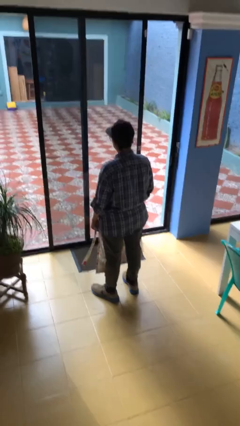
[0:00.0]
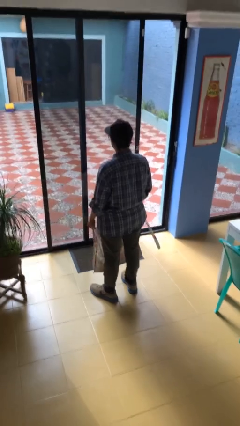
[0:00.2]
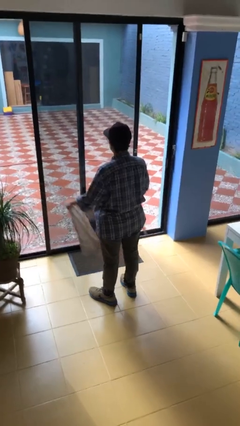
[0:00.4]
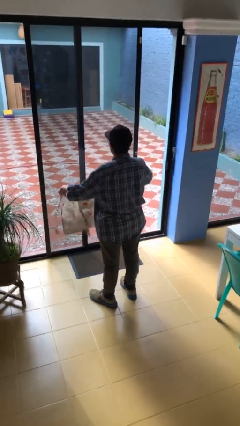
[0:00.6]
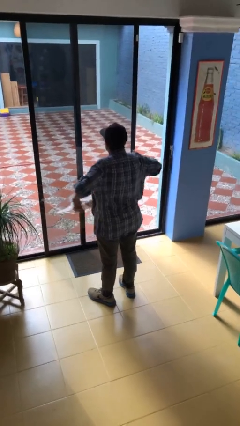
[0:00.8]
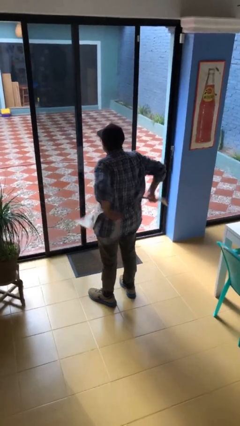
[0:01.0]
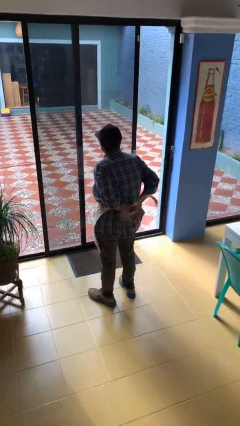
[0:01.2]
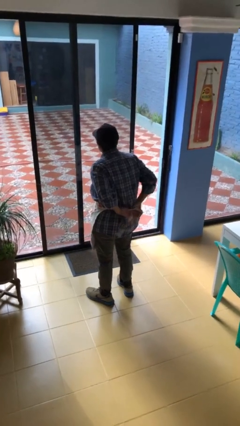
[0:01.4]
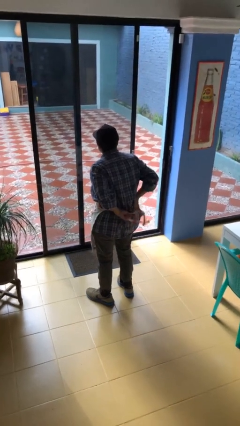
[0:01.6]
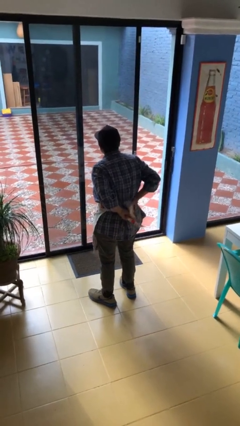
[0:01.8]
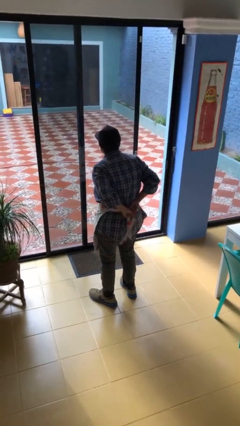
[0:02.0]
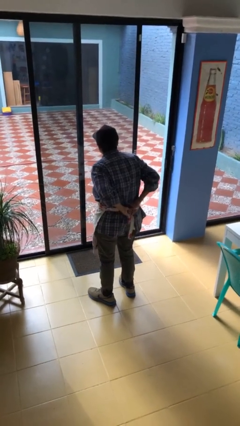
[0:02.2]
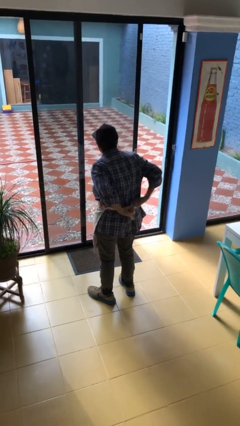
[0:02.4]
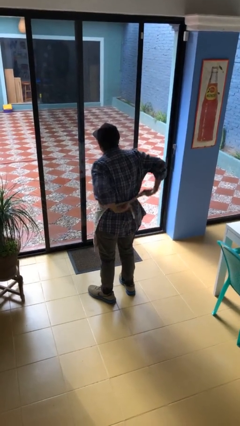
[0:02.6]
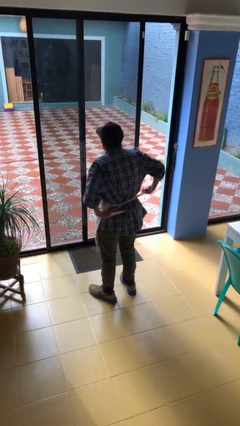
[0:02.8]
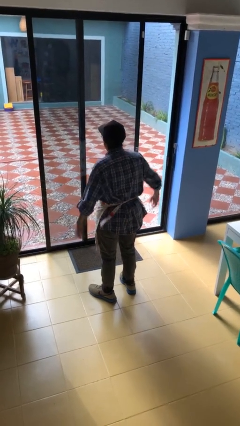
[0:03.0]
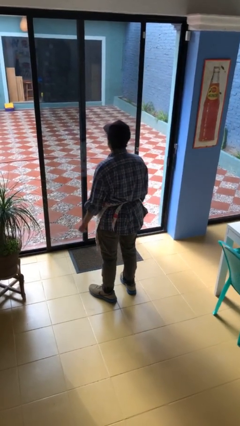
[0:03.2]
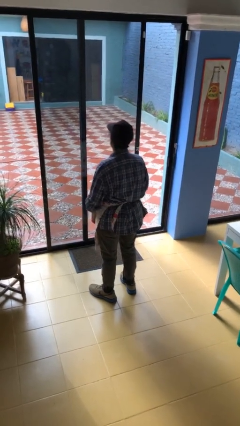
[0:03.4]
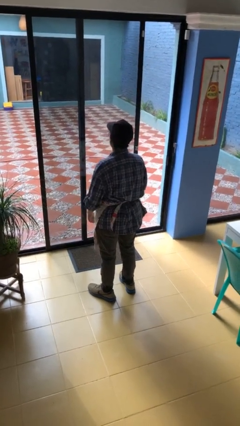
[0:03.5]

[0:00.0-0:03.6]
person puts on apron

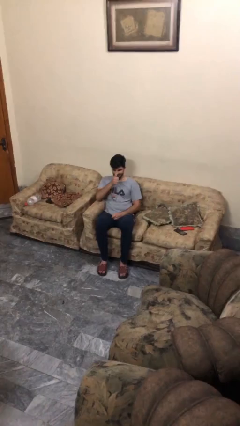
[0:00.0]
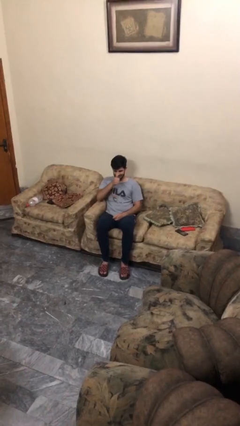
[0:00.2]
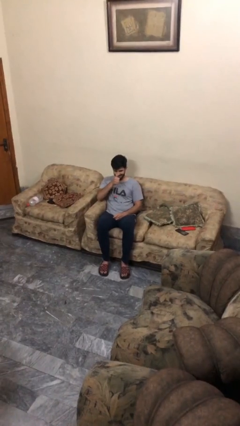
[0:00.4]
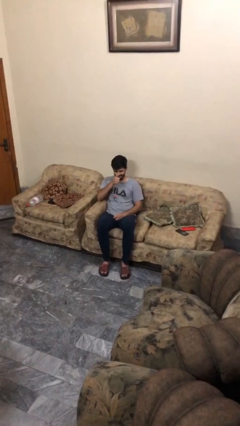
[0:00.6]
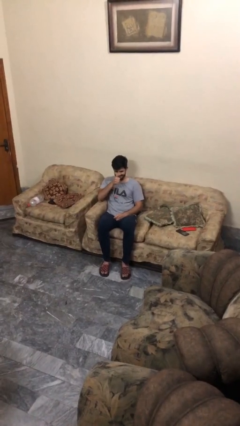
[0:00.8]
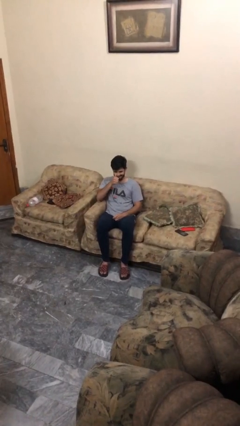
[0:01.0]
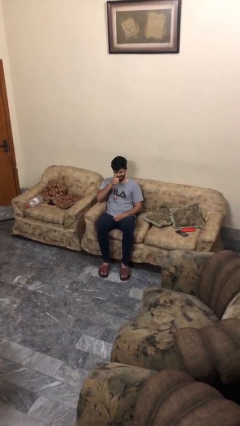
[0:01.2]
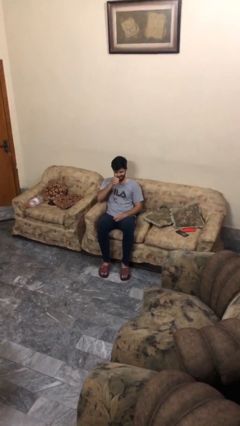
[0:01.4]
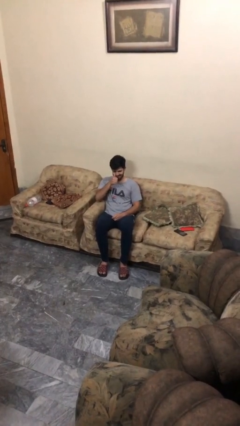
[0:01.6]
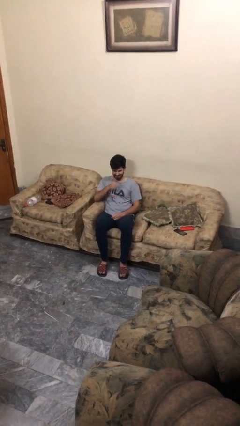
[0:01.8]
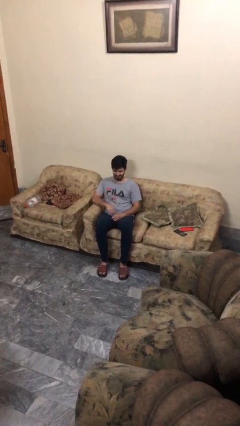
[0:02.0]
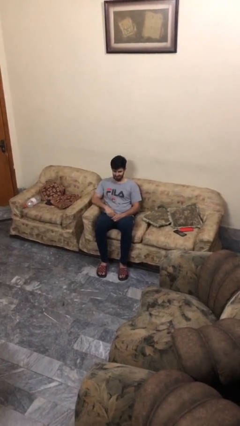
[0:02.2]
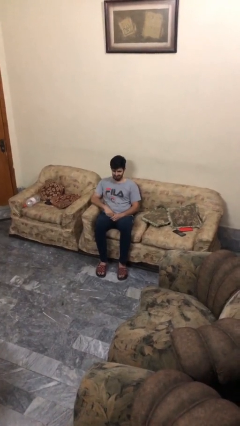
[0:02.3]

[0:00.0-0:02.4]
person gestures thumbs up

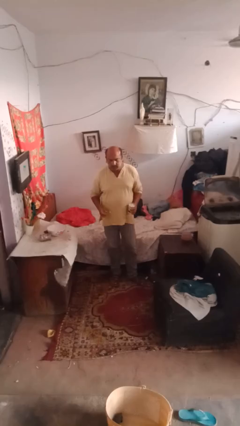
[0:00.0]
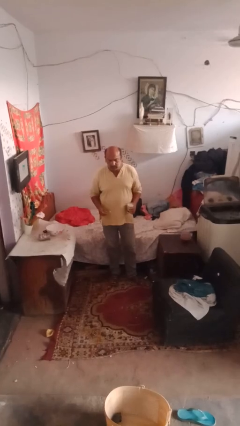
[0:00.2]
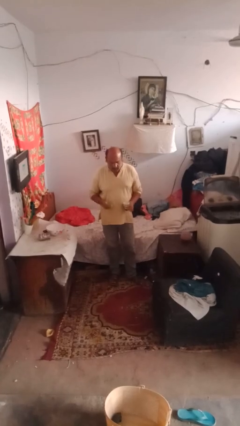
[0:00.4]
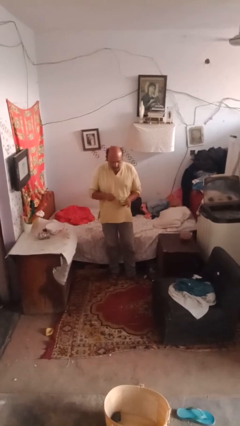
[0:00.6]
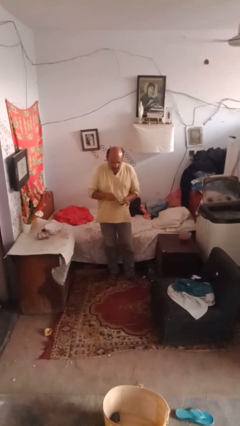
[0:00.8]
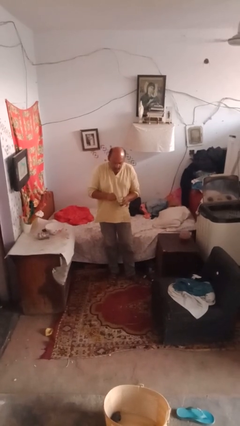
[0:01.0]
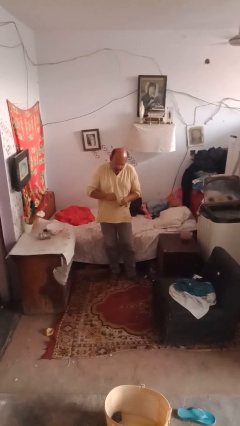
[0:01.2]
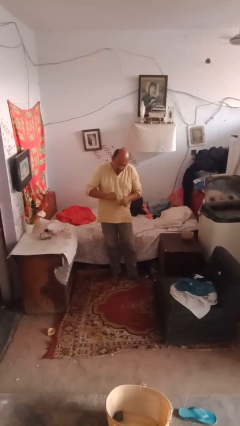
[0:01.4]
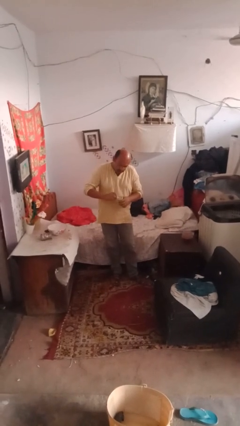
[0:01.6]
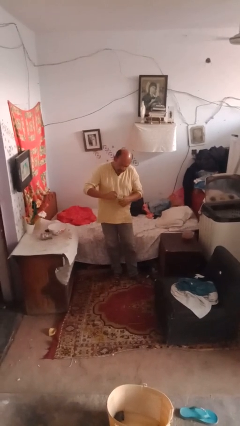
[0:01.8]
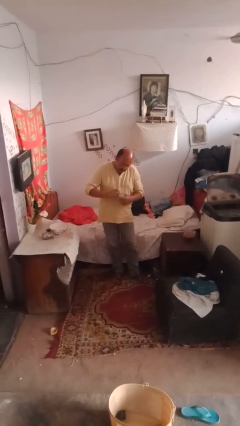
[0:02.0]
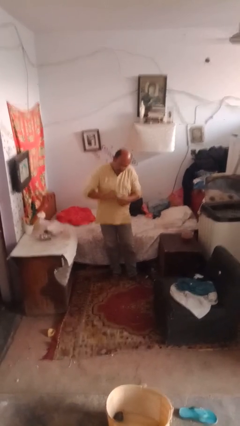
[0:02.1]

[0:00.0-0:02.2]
person opens can with can opener

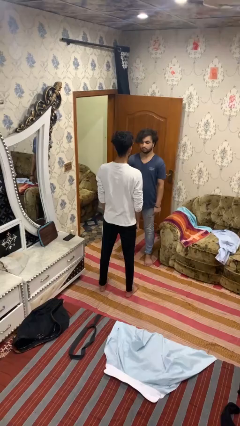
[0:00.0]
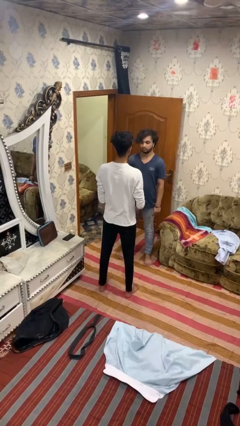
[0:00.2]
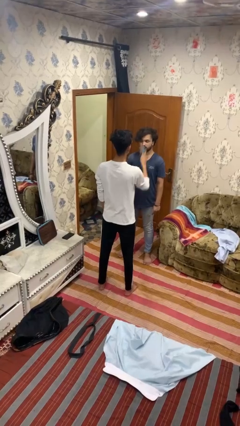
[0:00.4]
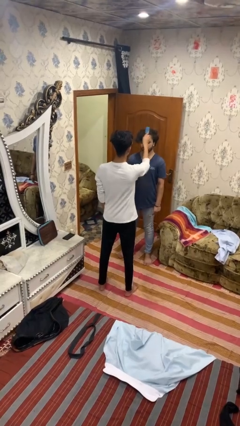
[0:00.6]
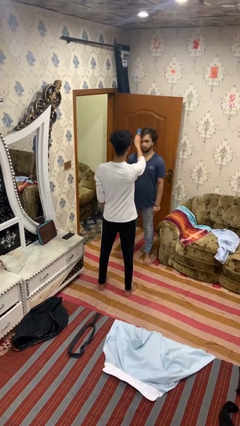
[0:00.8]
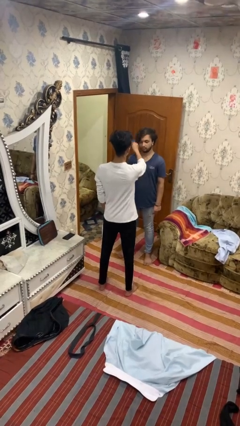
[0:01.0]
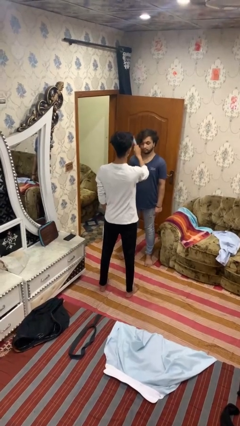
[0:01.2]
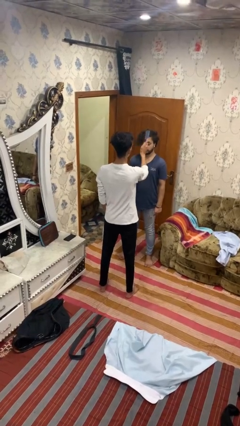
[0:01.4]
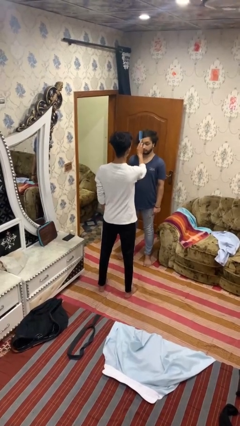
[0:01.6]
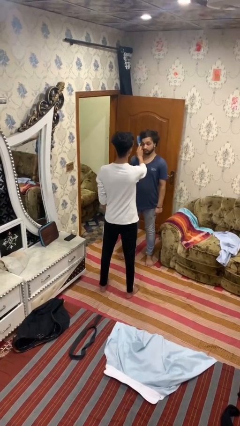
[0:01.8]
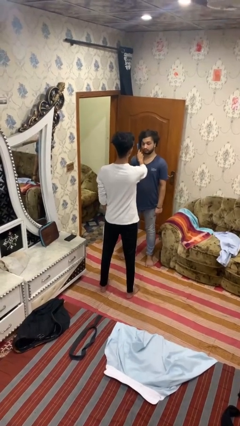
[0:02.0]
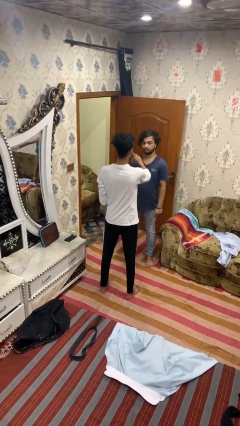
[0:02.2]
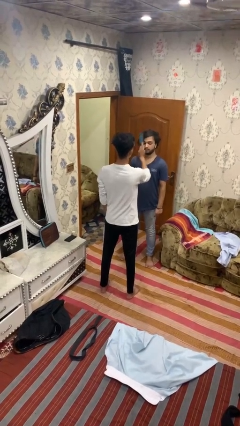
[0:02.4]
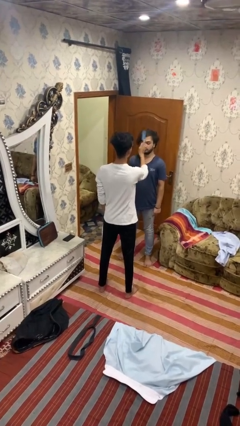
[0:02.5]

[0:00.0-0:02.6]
person brushes hair of person

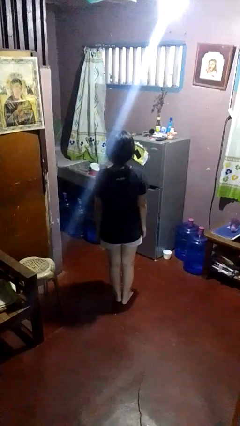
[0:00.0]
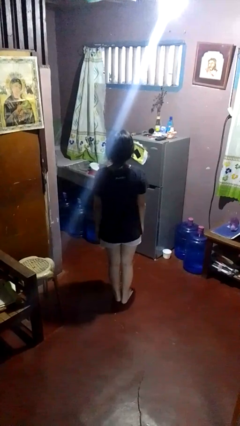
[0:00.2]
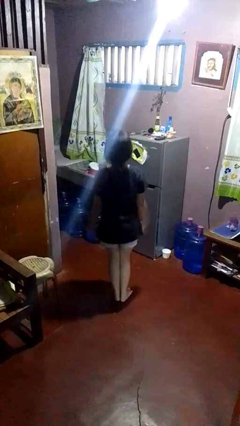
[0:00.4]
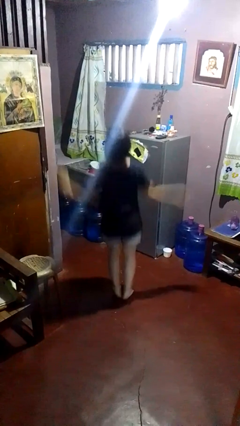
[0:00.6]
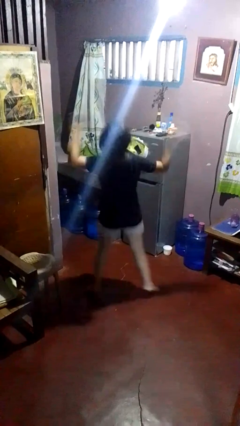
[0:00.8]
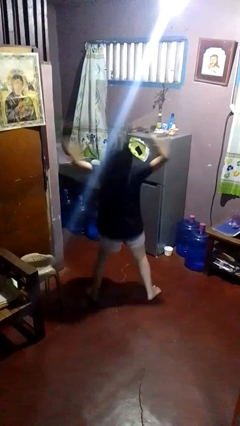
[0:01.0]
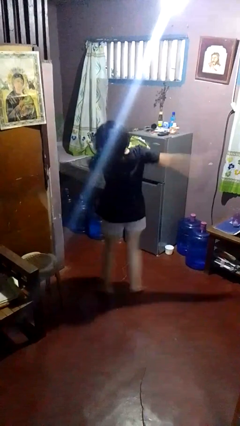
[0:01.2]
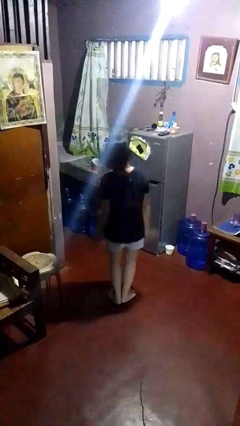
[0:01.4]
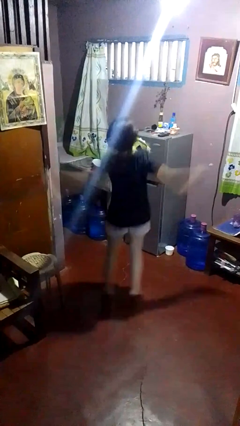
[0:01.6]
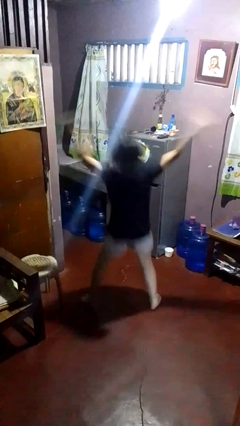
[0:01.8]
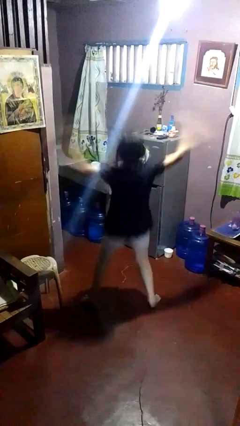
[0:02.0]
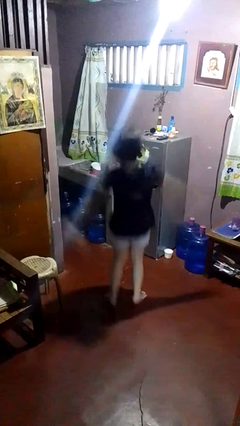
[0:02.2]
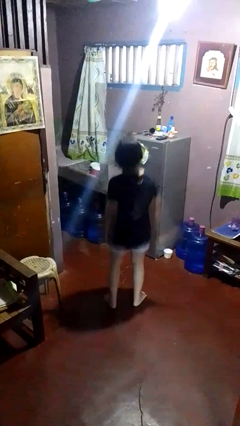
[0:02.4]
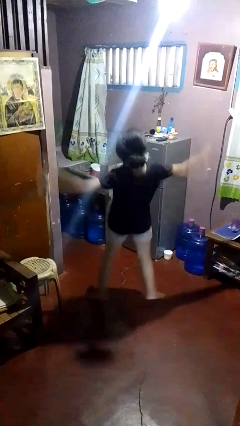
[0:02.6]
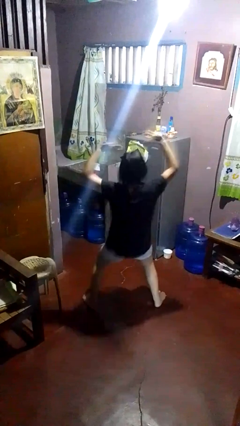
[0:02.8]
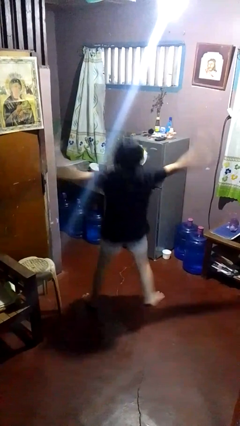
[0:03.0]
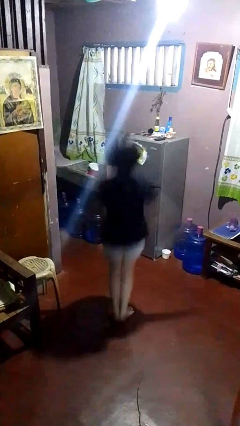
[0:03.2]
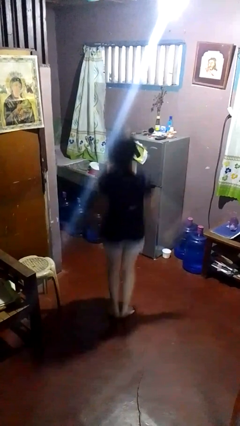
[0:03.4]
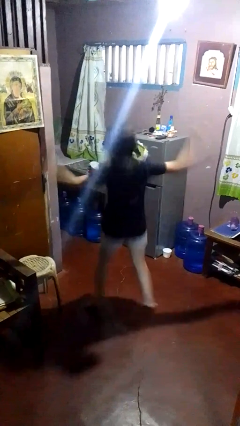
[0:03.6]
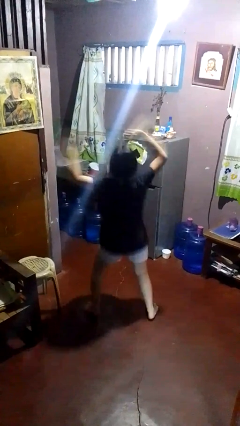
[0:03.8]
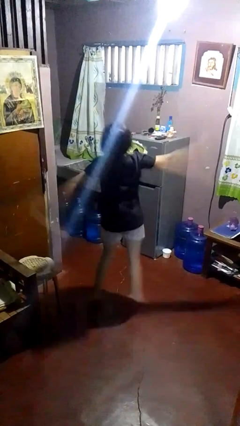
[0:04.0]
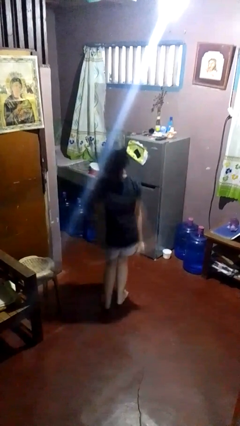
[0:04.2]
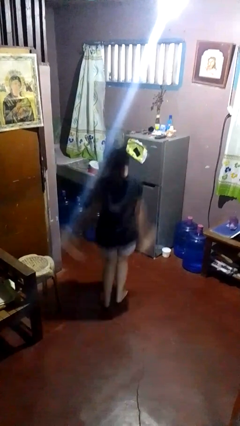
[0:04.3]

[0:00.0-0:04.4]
person exercises with jumping jacks

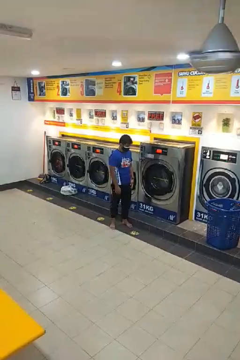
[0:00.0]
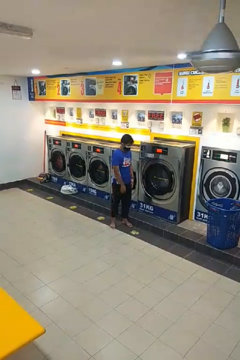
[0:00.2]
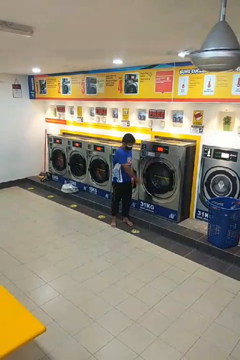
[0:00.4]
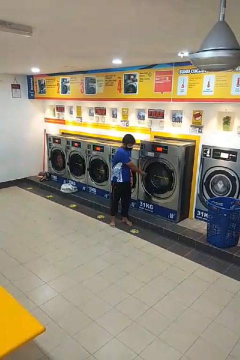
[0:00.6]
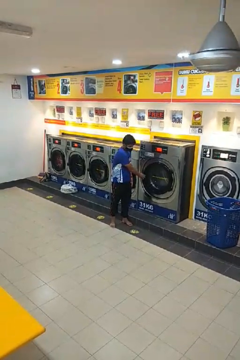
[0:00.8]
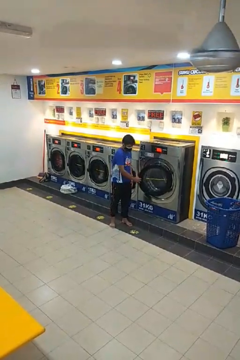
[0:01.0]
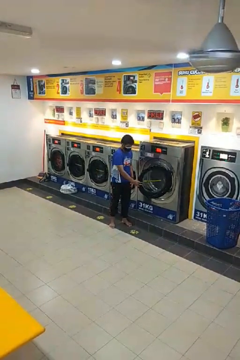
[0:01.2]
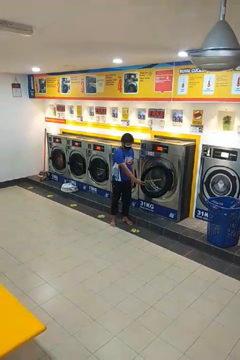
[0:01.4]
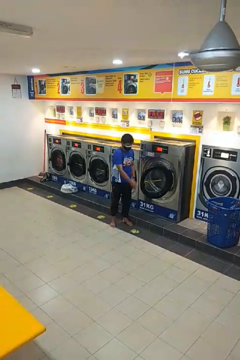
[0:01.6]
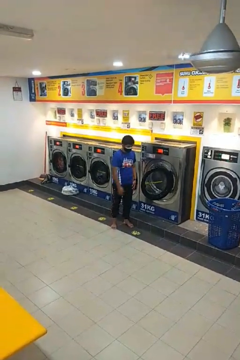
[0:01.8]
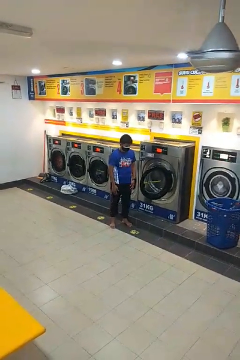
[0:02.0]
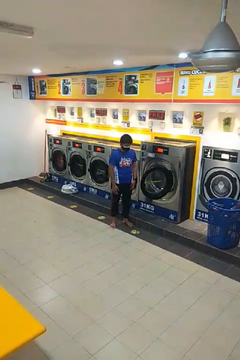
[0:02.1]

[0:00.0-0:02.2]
person opens clothes washer
